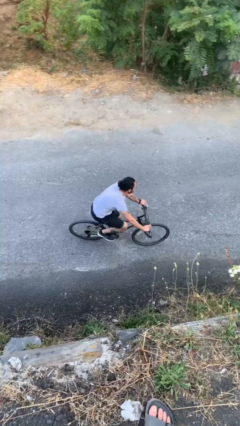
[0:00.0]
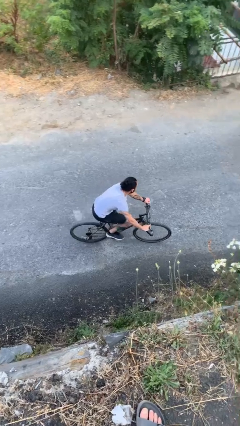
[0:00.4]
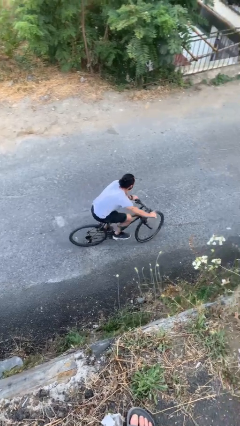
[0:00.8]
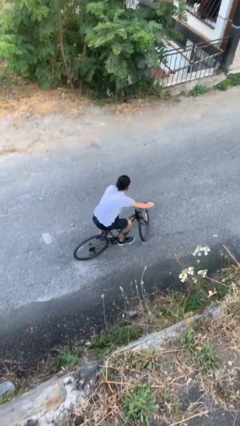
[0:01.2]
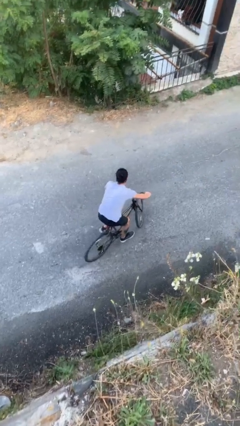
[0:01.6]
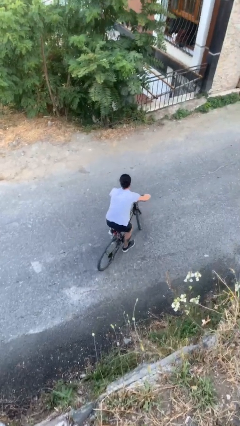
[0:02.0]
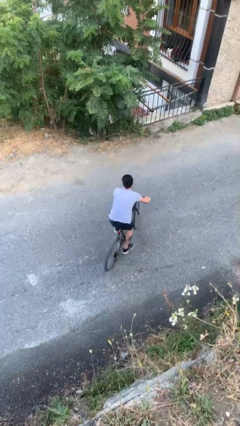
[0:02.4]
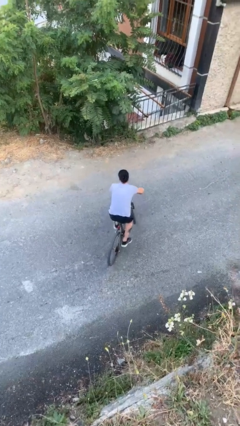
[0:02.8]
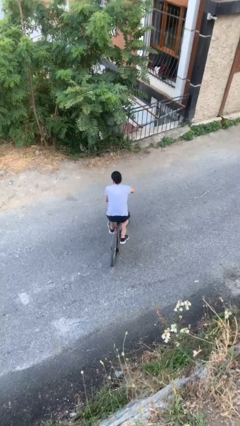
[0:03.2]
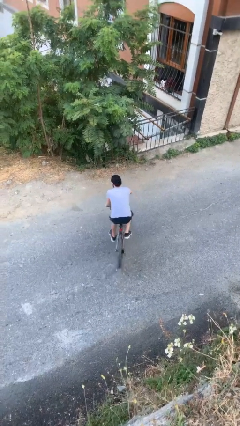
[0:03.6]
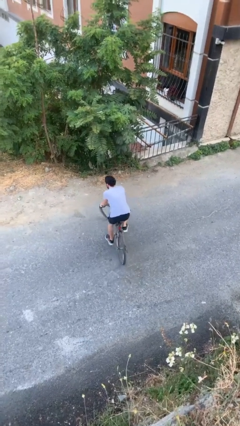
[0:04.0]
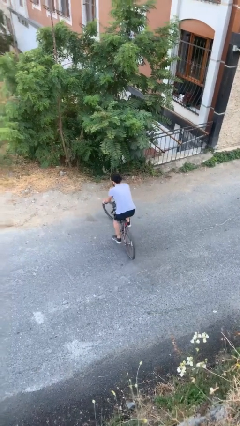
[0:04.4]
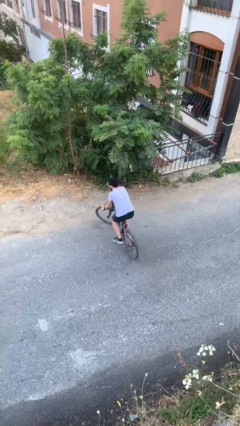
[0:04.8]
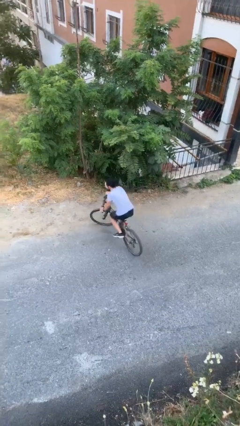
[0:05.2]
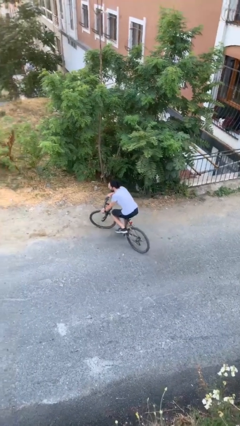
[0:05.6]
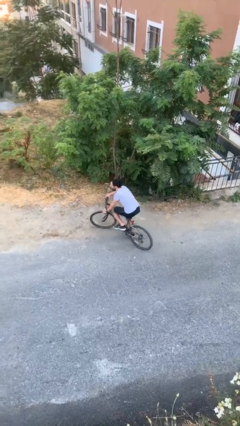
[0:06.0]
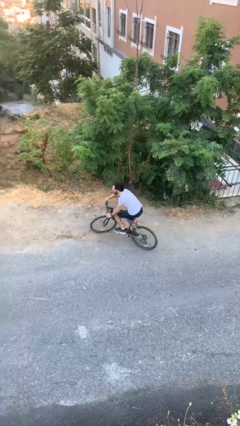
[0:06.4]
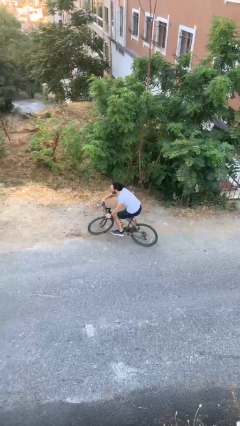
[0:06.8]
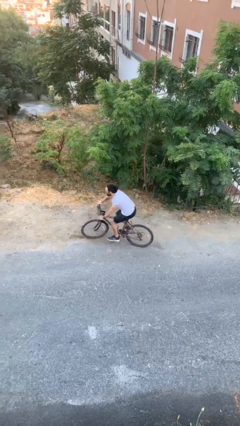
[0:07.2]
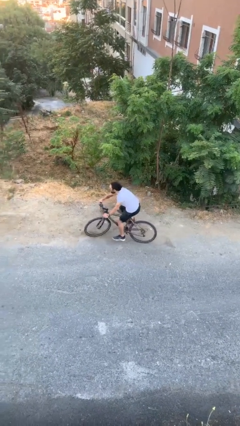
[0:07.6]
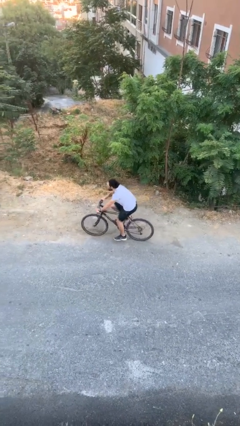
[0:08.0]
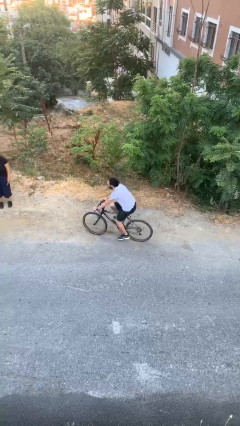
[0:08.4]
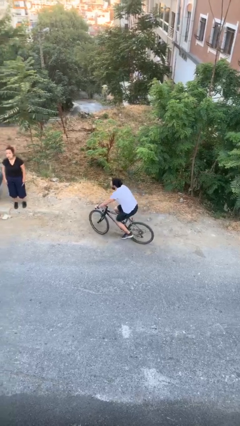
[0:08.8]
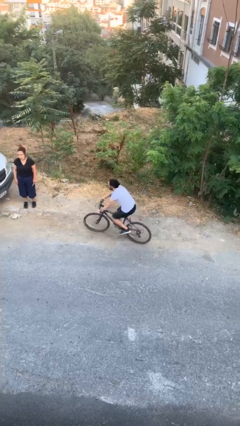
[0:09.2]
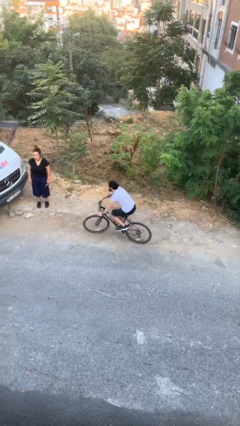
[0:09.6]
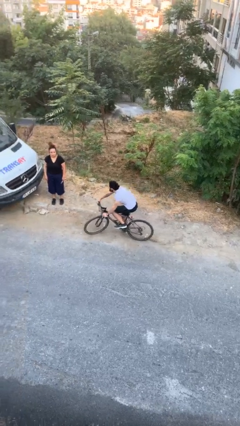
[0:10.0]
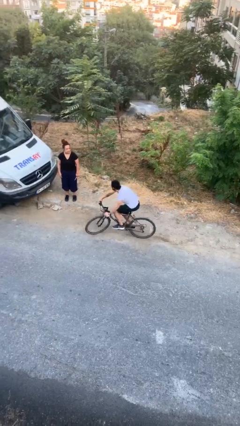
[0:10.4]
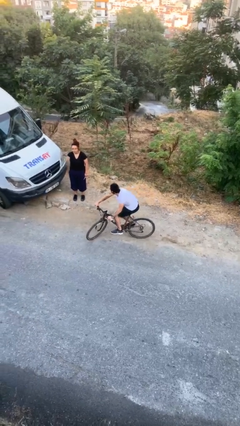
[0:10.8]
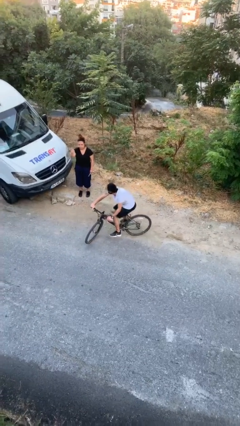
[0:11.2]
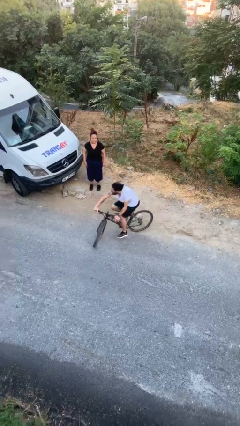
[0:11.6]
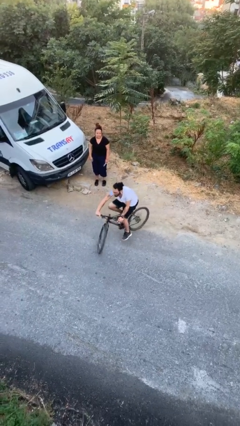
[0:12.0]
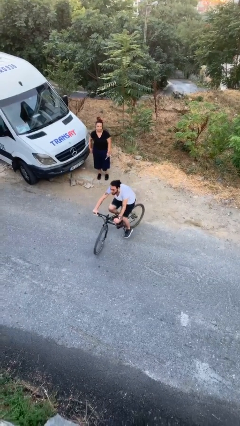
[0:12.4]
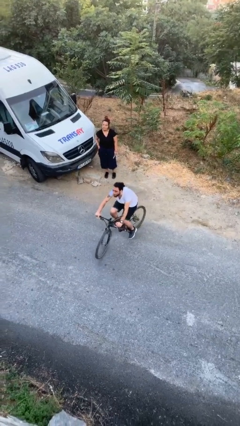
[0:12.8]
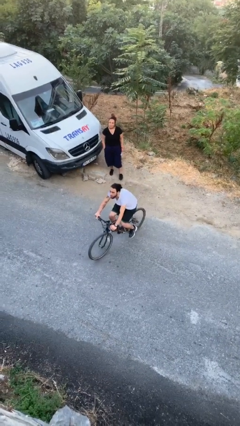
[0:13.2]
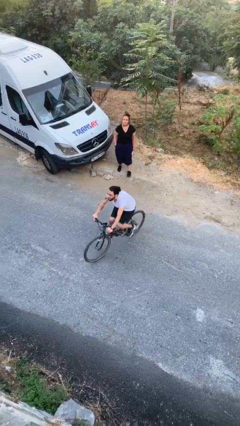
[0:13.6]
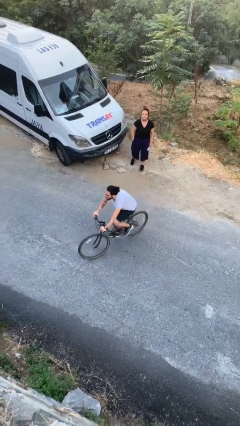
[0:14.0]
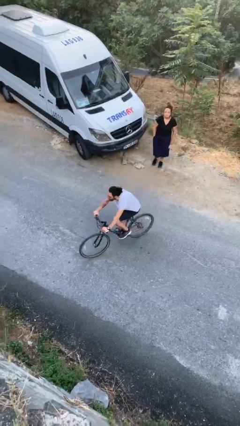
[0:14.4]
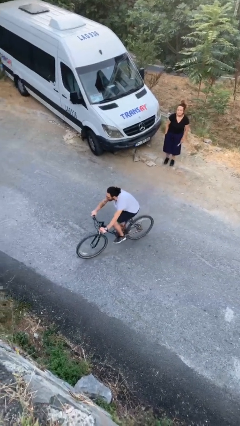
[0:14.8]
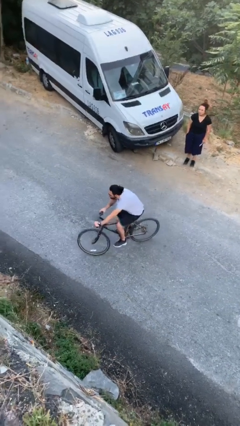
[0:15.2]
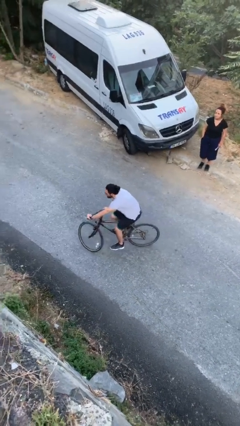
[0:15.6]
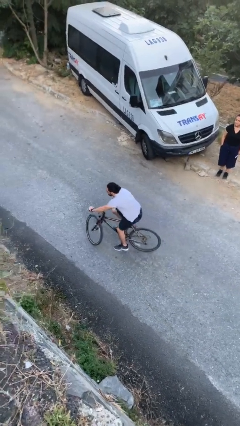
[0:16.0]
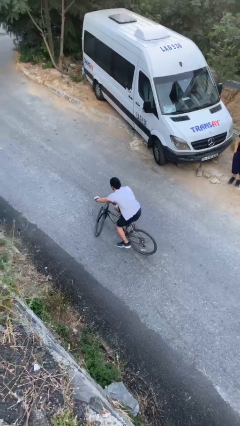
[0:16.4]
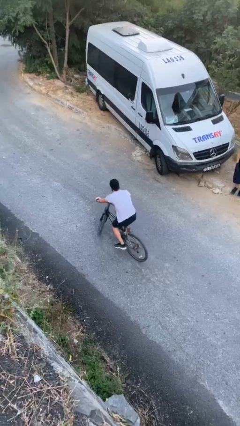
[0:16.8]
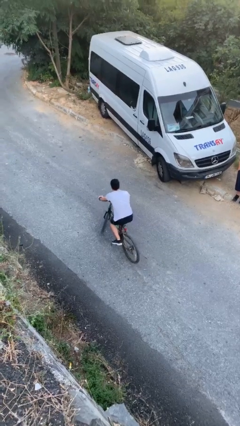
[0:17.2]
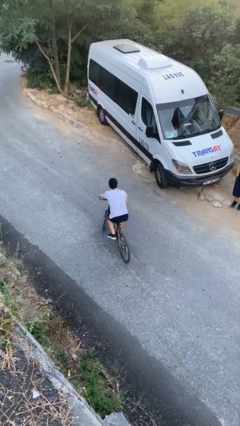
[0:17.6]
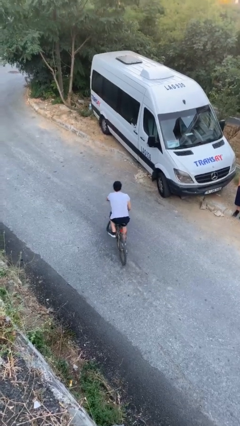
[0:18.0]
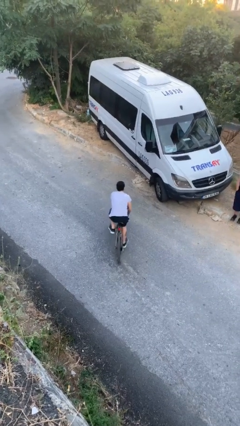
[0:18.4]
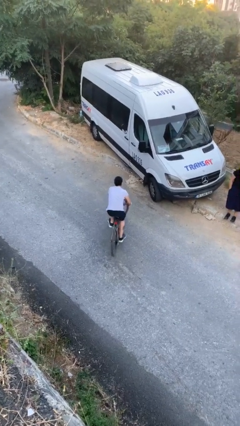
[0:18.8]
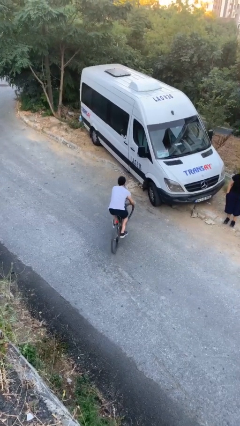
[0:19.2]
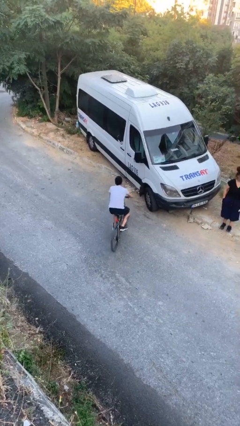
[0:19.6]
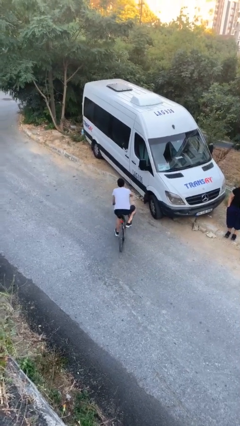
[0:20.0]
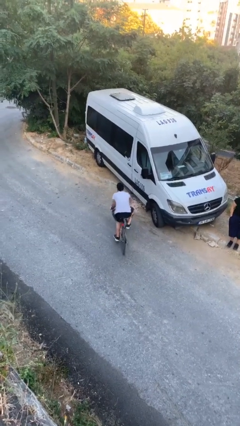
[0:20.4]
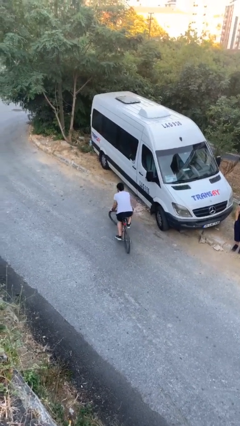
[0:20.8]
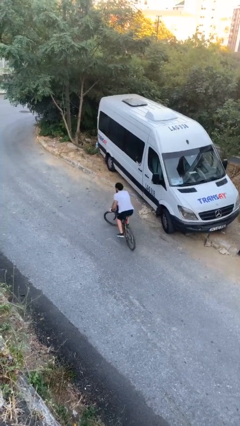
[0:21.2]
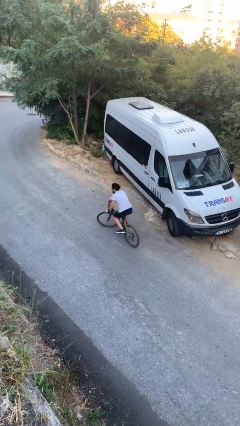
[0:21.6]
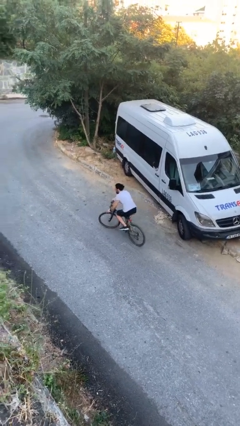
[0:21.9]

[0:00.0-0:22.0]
person rides bicycle

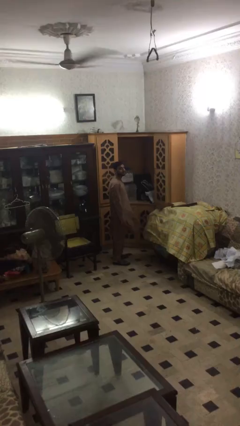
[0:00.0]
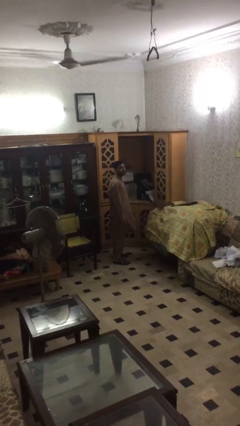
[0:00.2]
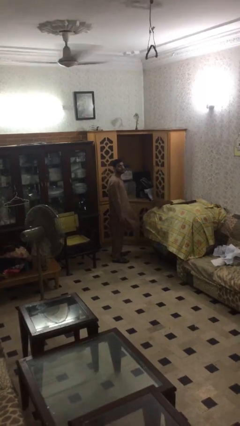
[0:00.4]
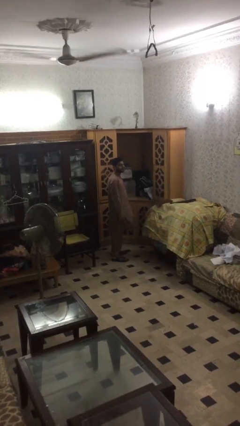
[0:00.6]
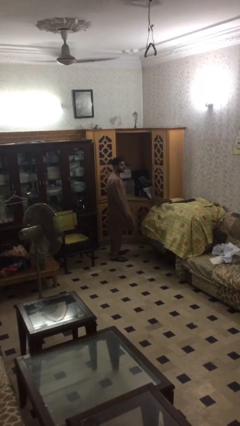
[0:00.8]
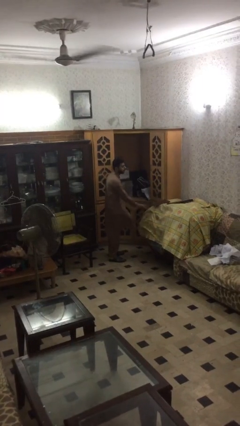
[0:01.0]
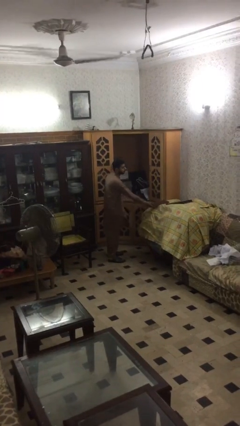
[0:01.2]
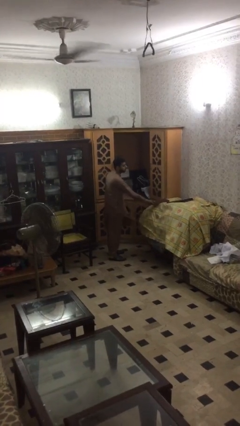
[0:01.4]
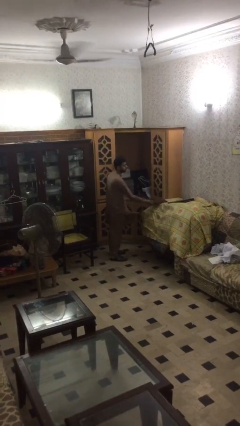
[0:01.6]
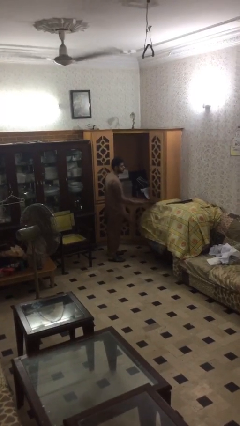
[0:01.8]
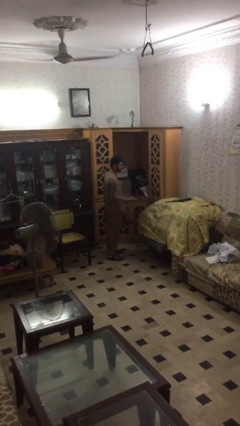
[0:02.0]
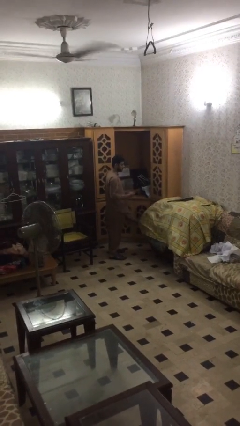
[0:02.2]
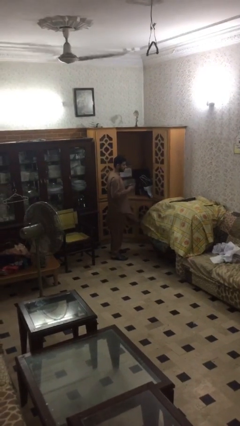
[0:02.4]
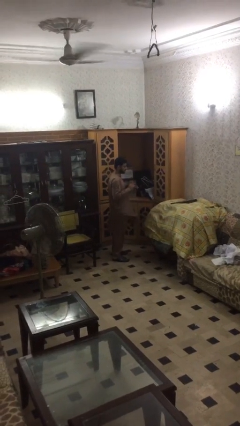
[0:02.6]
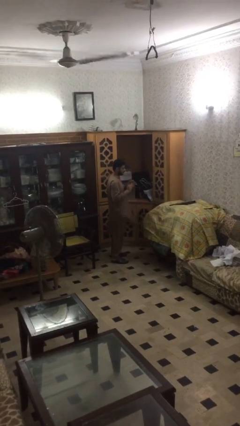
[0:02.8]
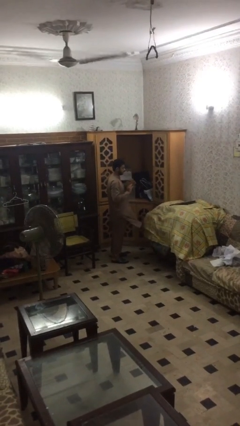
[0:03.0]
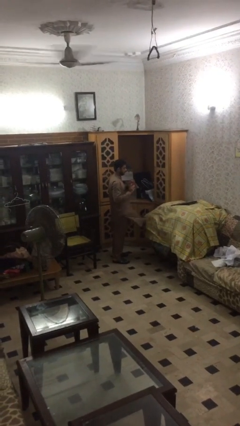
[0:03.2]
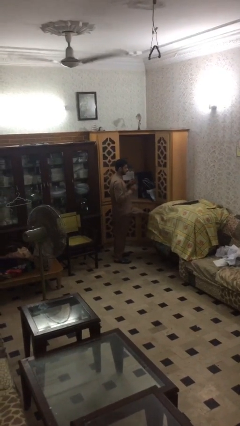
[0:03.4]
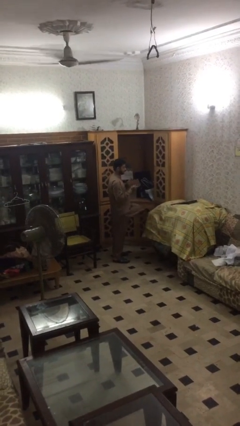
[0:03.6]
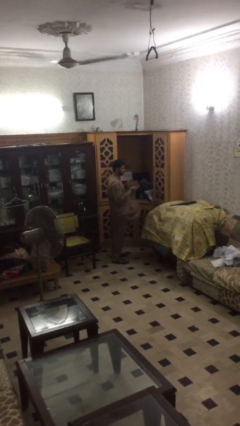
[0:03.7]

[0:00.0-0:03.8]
person picks up object from table

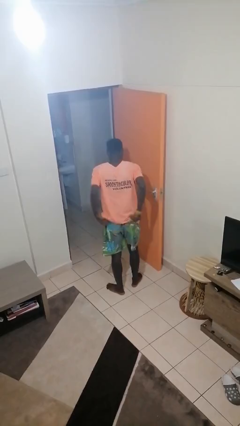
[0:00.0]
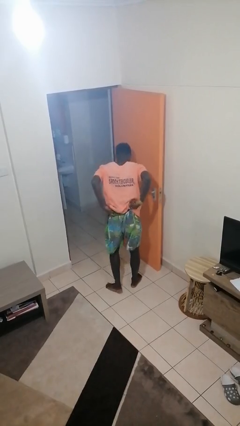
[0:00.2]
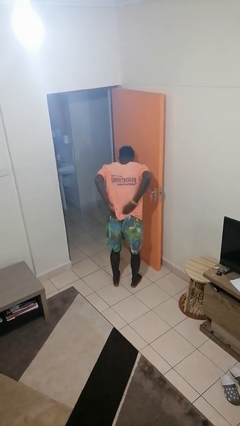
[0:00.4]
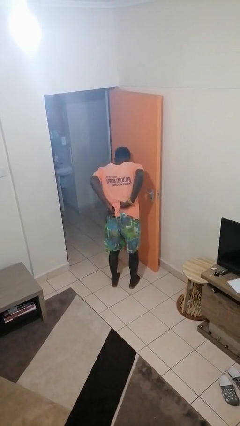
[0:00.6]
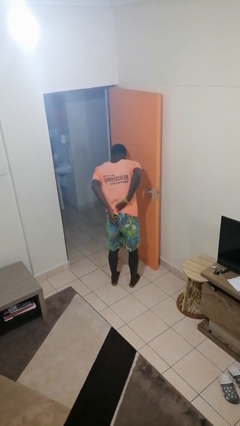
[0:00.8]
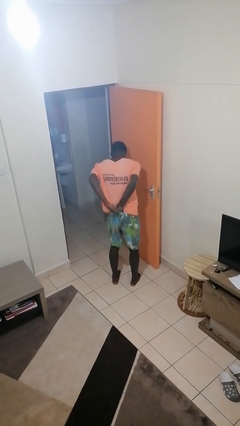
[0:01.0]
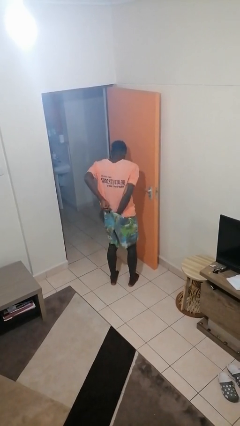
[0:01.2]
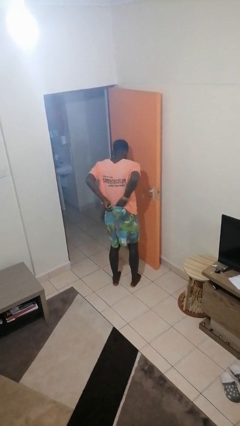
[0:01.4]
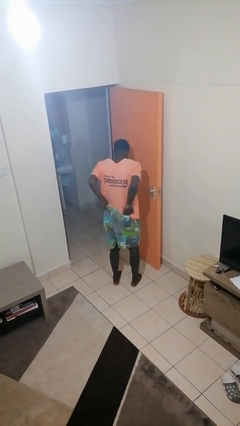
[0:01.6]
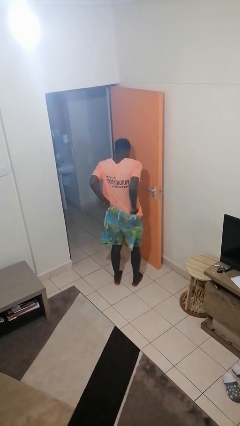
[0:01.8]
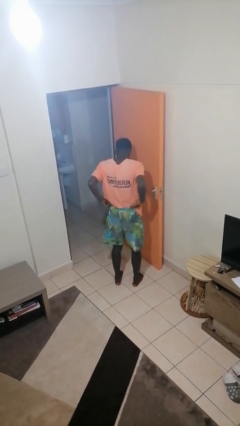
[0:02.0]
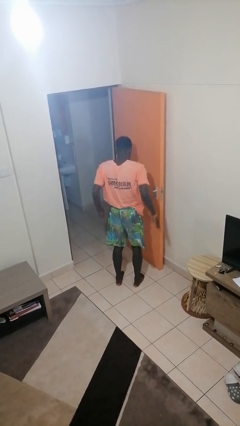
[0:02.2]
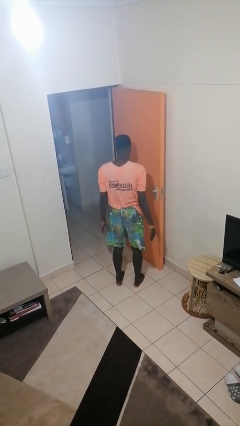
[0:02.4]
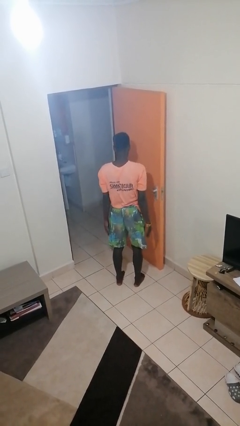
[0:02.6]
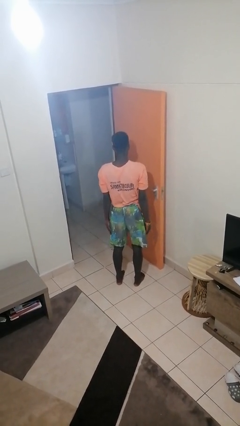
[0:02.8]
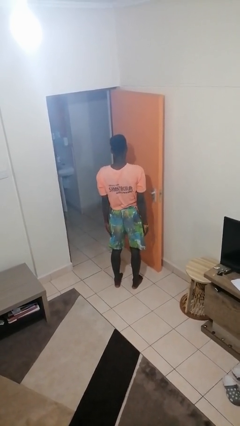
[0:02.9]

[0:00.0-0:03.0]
person tucks in shirt

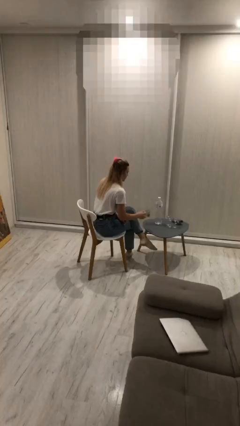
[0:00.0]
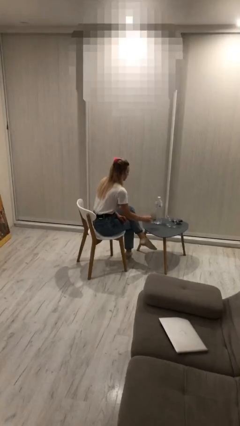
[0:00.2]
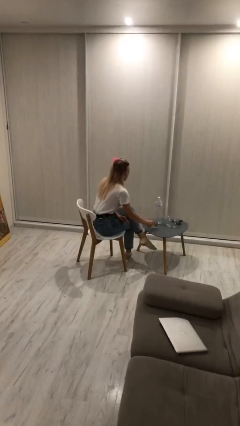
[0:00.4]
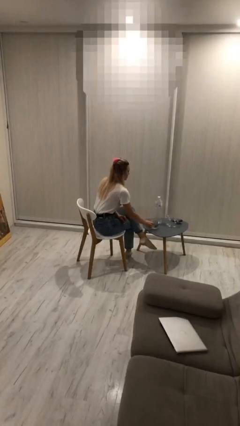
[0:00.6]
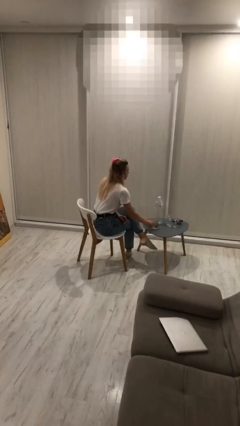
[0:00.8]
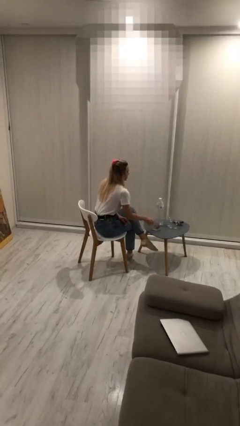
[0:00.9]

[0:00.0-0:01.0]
person puts down object on table
